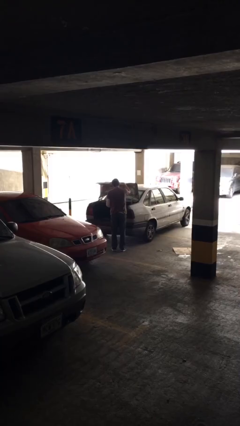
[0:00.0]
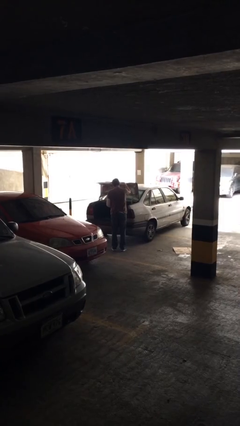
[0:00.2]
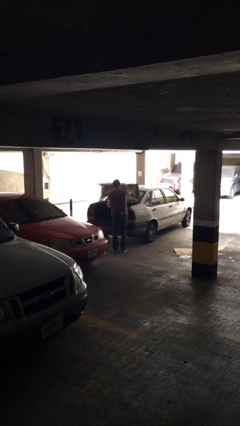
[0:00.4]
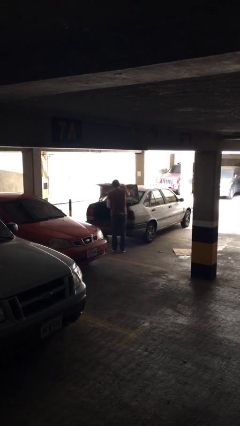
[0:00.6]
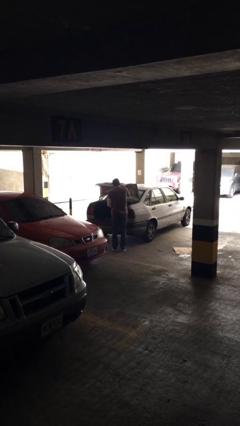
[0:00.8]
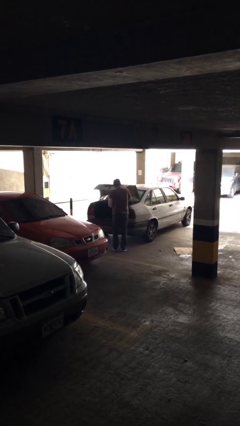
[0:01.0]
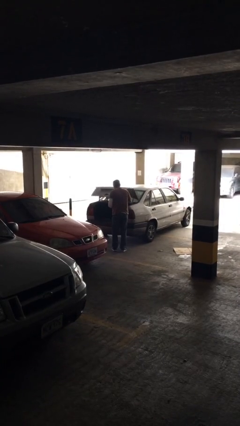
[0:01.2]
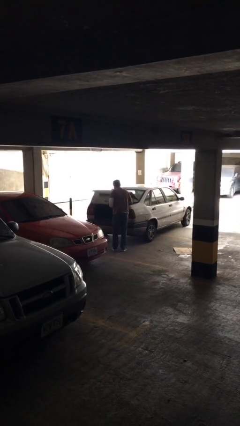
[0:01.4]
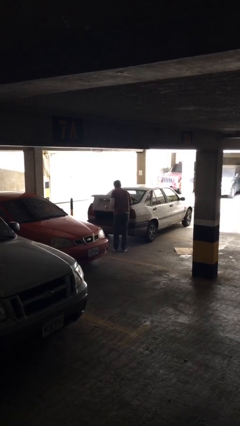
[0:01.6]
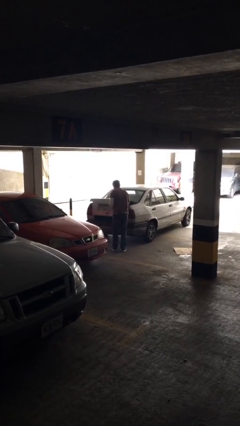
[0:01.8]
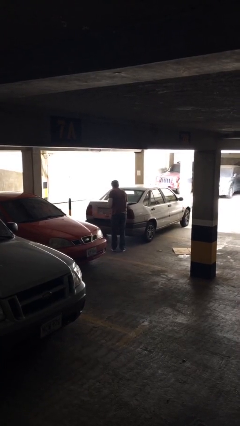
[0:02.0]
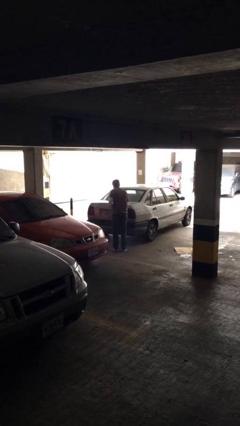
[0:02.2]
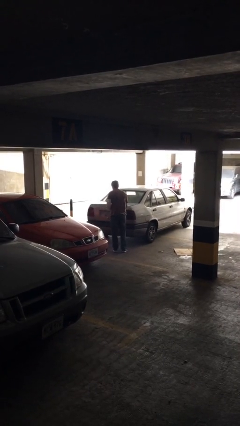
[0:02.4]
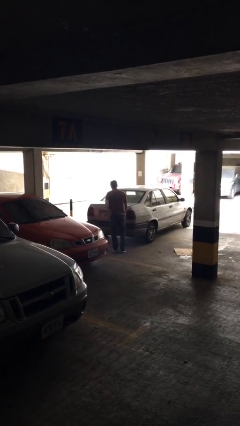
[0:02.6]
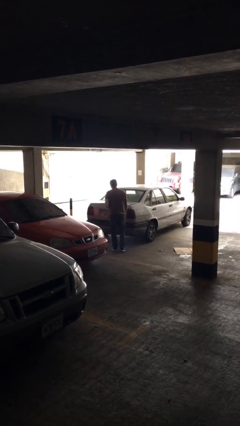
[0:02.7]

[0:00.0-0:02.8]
person closes car trunk

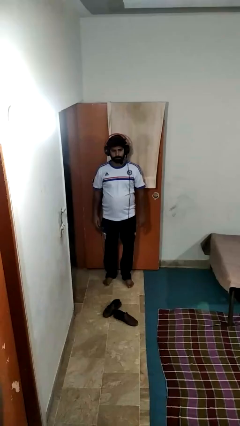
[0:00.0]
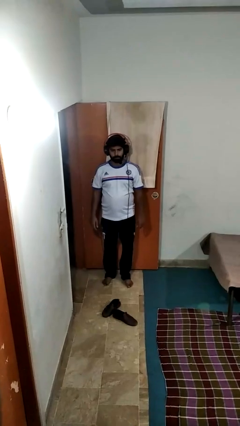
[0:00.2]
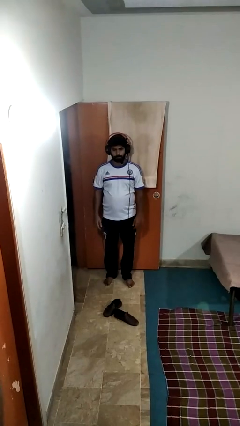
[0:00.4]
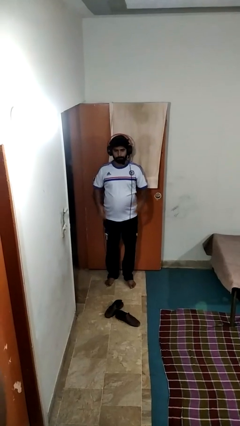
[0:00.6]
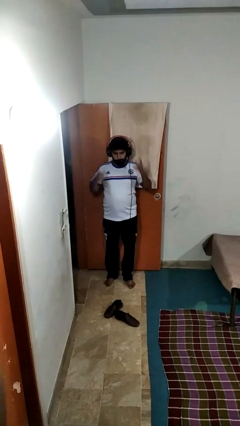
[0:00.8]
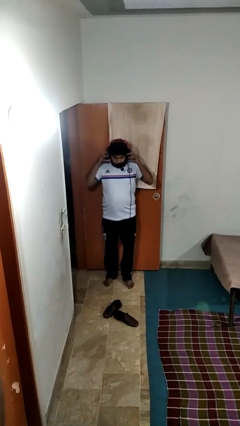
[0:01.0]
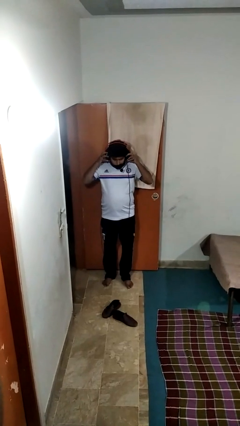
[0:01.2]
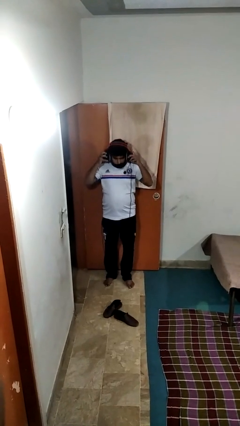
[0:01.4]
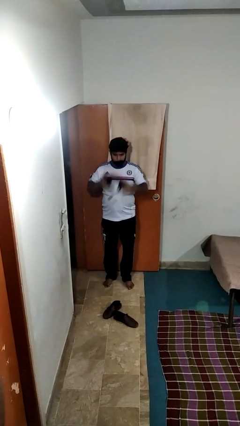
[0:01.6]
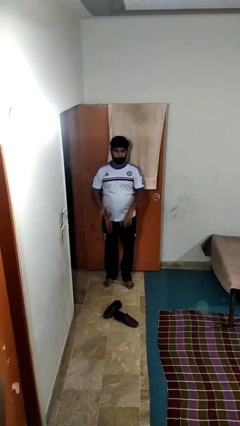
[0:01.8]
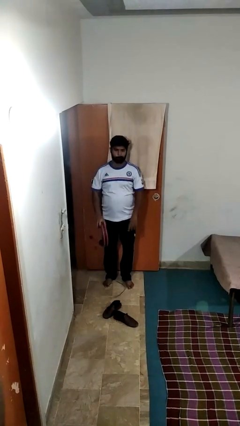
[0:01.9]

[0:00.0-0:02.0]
person takes off headphones

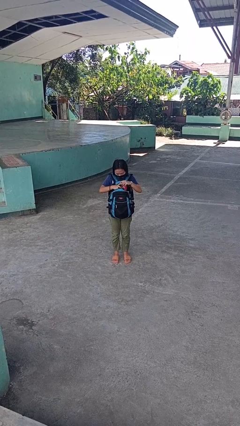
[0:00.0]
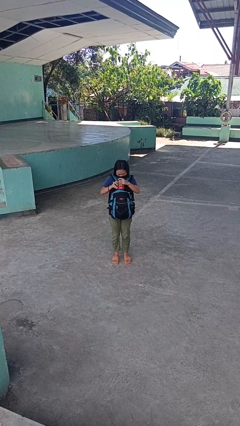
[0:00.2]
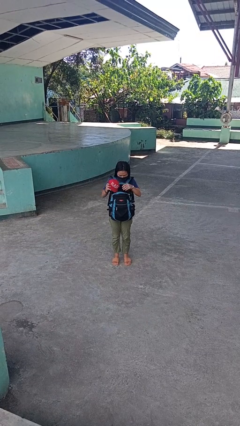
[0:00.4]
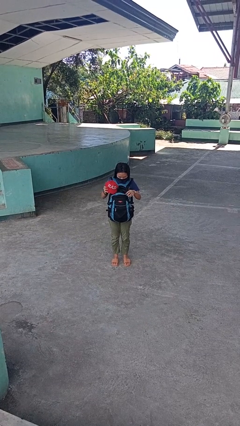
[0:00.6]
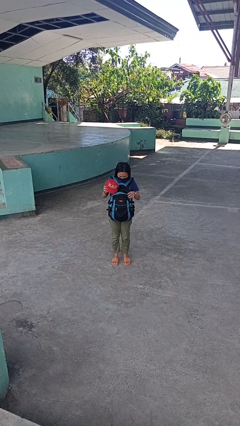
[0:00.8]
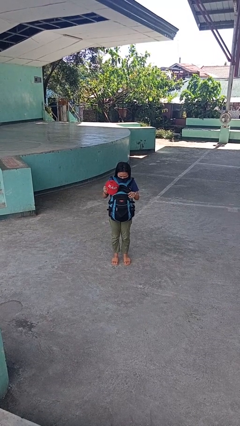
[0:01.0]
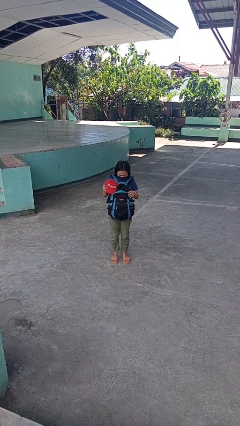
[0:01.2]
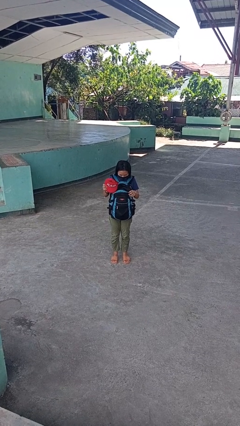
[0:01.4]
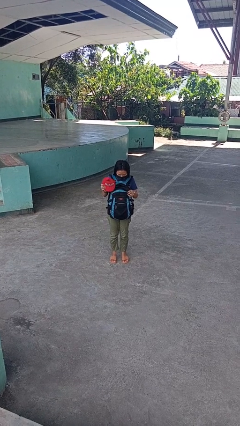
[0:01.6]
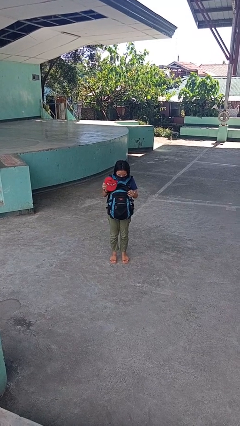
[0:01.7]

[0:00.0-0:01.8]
person takes object from backpack

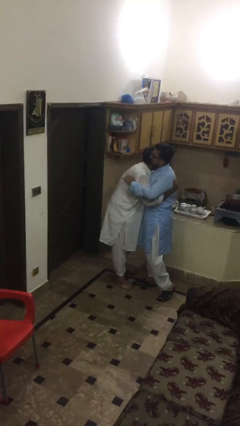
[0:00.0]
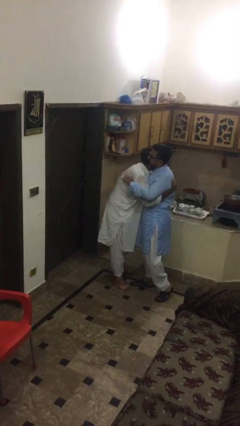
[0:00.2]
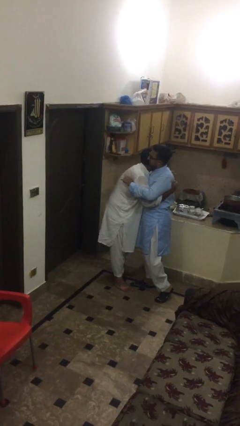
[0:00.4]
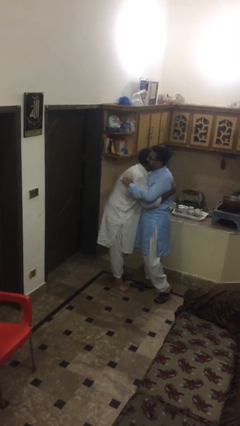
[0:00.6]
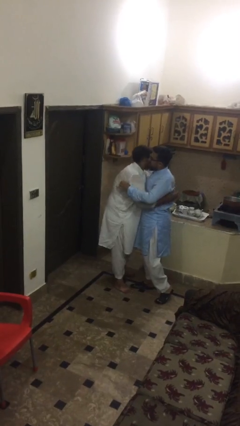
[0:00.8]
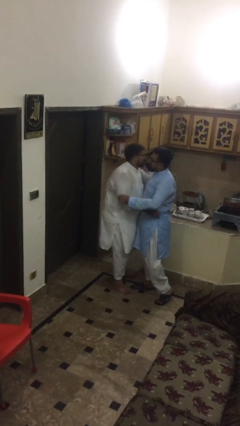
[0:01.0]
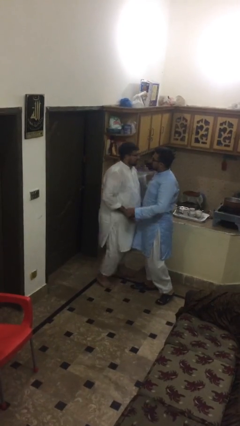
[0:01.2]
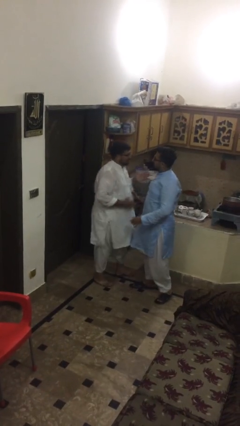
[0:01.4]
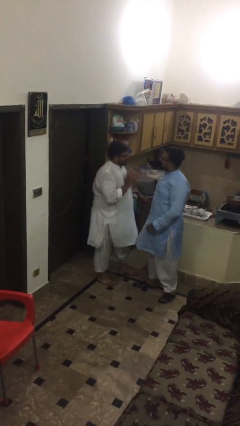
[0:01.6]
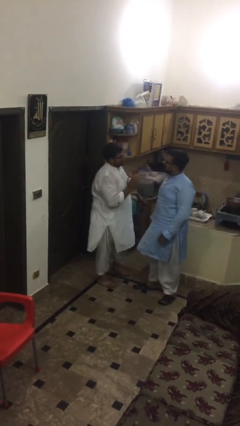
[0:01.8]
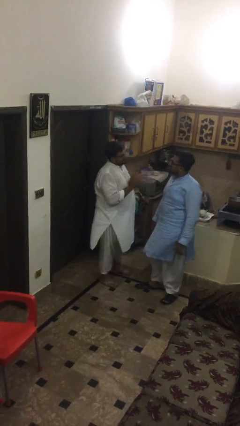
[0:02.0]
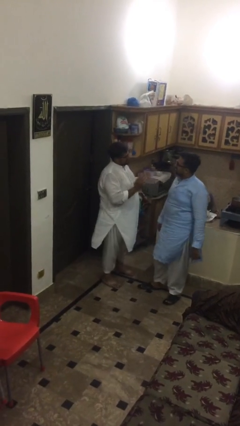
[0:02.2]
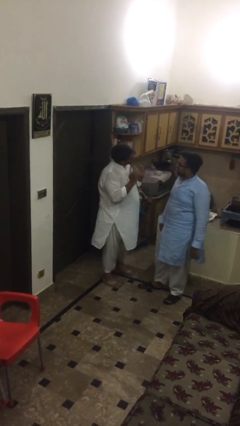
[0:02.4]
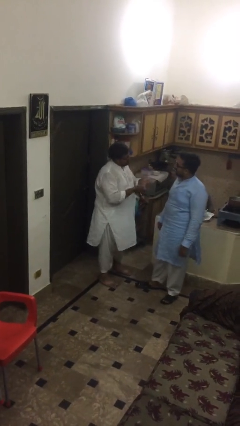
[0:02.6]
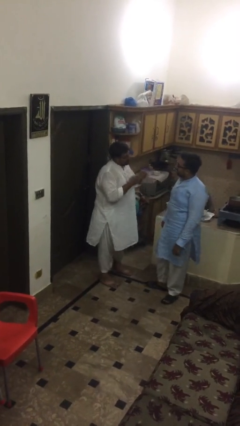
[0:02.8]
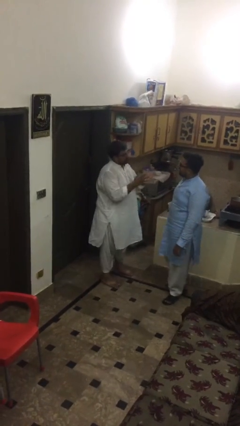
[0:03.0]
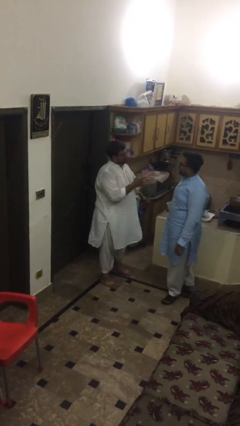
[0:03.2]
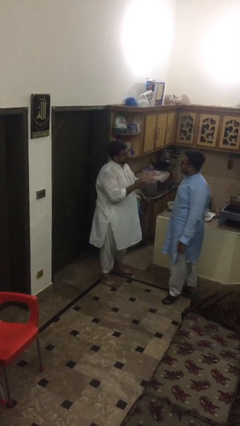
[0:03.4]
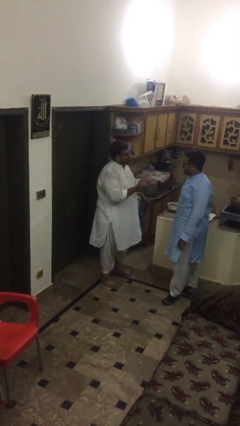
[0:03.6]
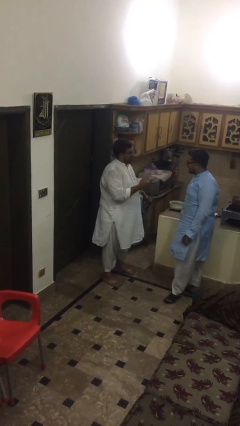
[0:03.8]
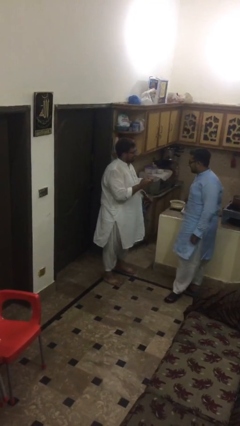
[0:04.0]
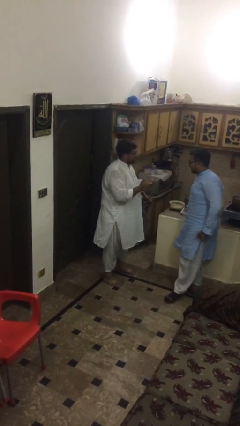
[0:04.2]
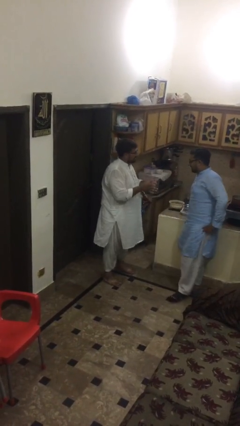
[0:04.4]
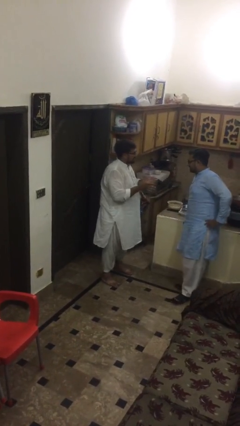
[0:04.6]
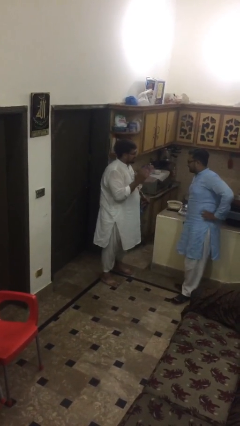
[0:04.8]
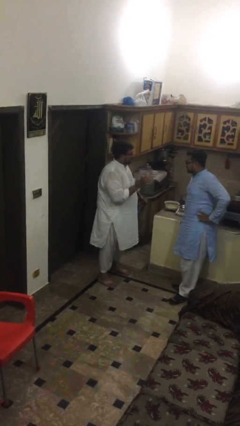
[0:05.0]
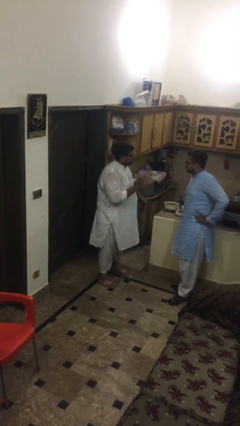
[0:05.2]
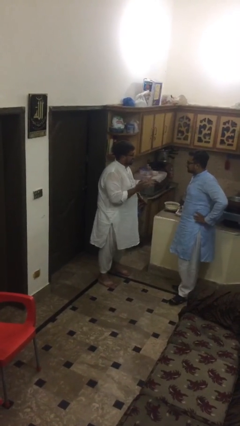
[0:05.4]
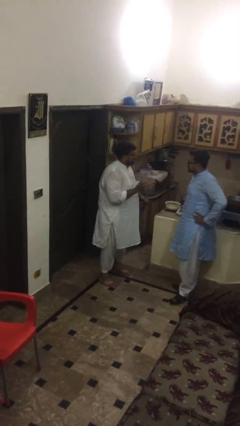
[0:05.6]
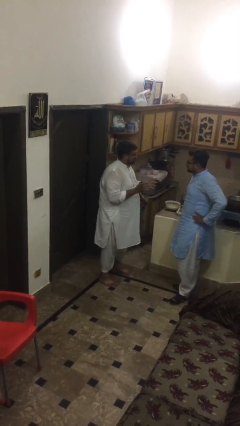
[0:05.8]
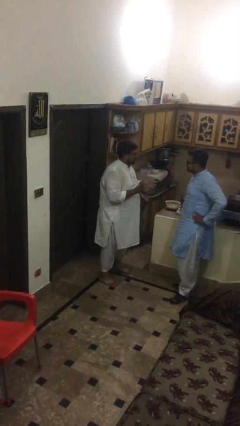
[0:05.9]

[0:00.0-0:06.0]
person talks to person

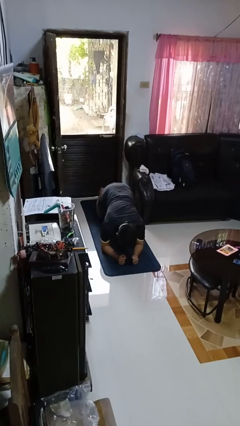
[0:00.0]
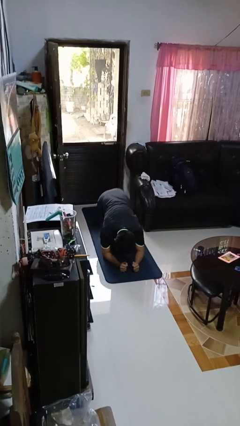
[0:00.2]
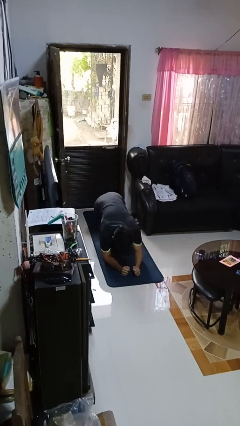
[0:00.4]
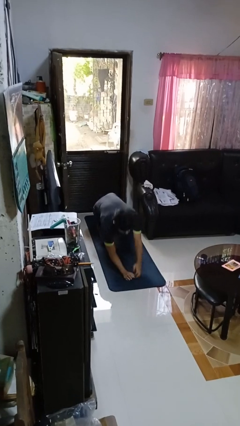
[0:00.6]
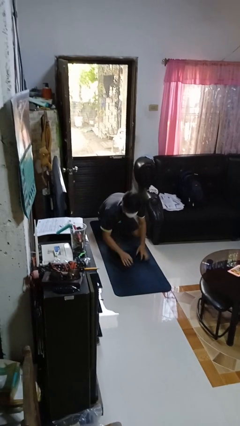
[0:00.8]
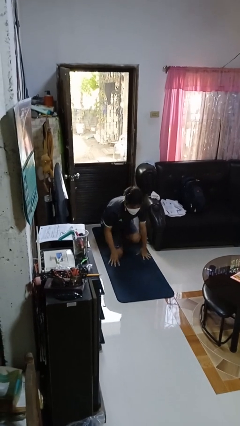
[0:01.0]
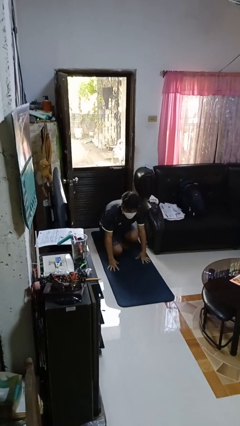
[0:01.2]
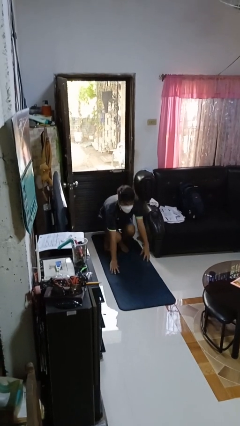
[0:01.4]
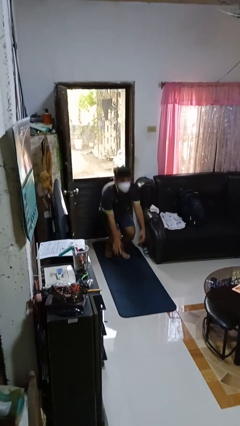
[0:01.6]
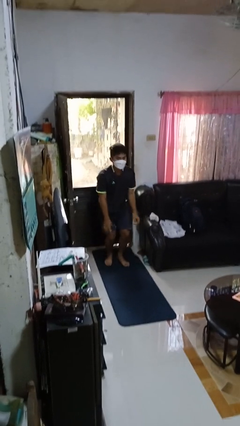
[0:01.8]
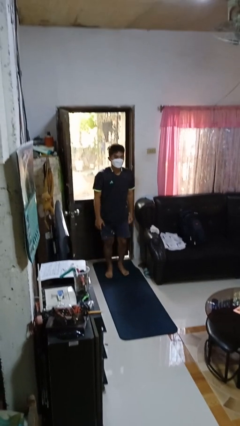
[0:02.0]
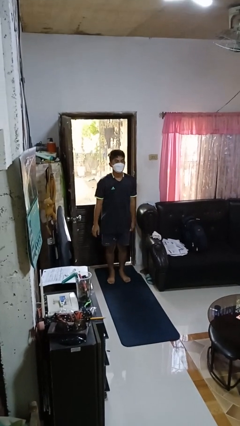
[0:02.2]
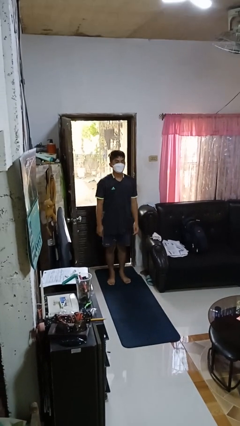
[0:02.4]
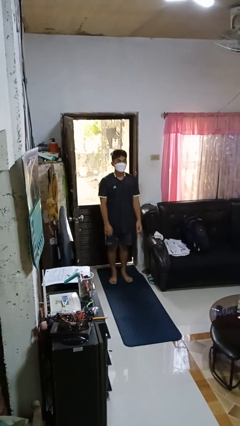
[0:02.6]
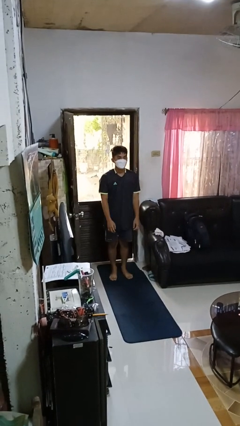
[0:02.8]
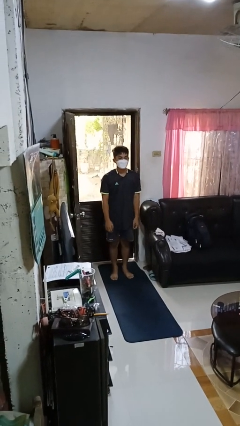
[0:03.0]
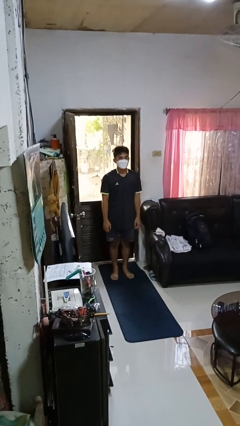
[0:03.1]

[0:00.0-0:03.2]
person stands up from floor

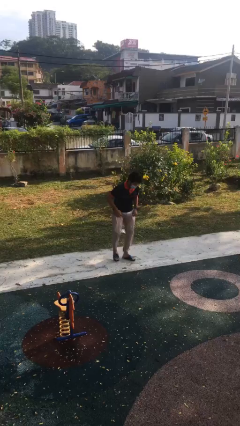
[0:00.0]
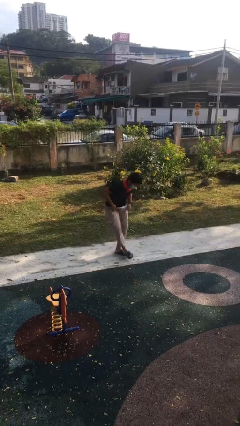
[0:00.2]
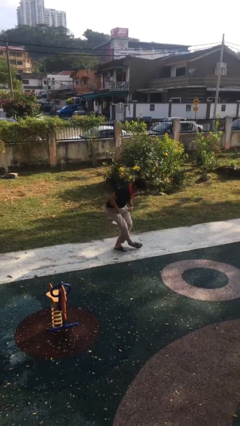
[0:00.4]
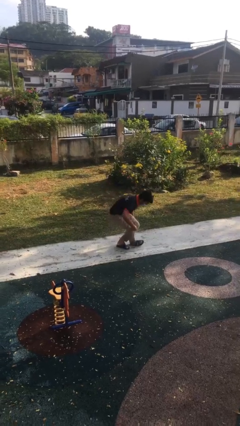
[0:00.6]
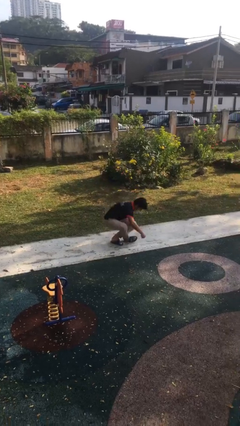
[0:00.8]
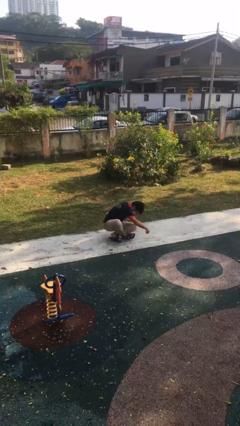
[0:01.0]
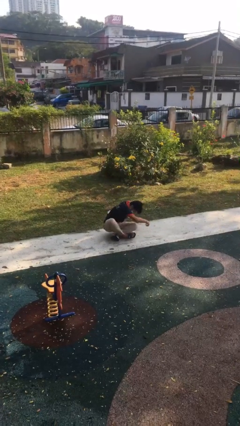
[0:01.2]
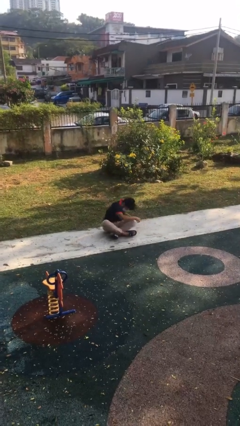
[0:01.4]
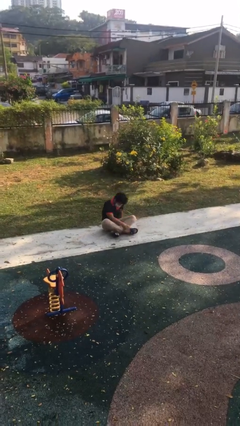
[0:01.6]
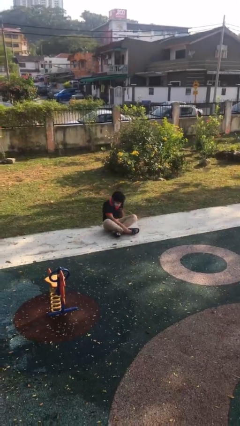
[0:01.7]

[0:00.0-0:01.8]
person sits crisscross
